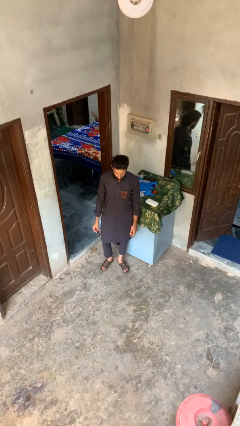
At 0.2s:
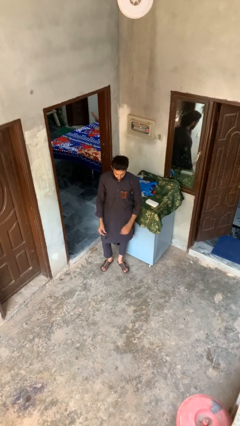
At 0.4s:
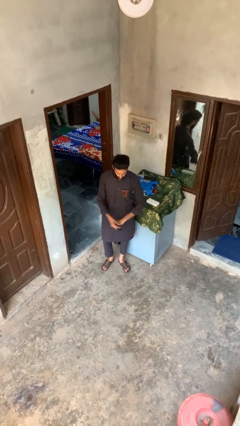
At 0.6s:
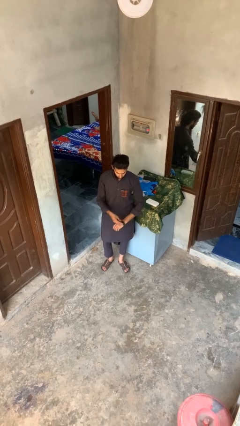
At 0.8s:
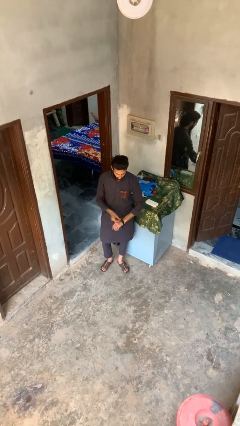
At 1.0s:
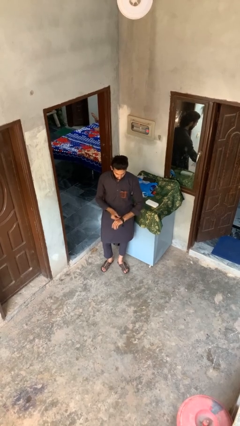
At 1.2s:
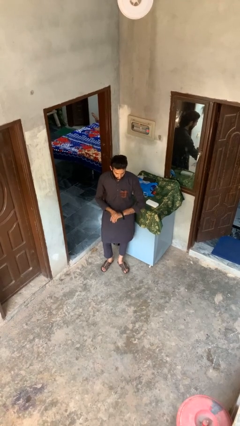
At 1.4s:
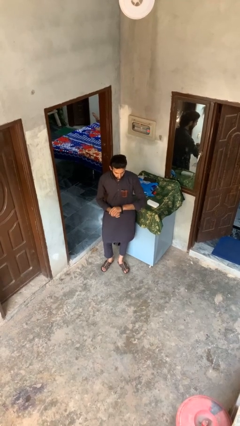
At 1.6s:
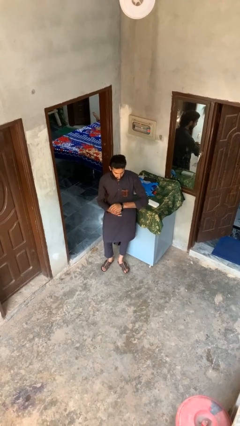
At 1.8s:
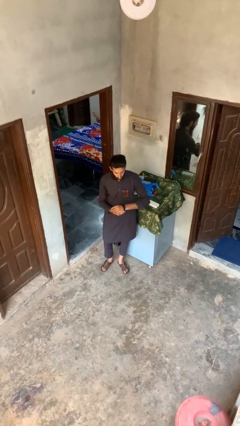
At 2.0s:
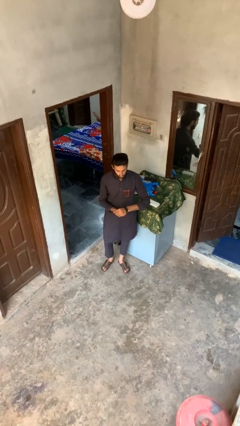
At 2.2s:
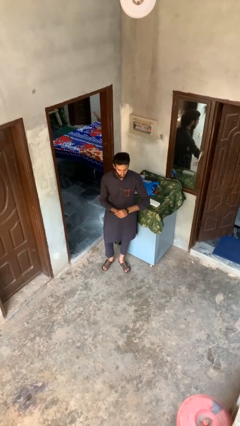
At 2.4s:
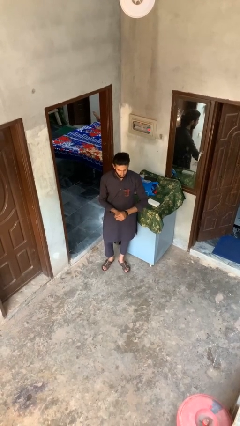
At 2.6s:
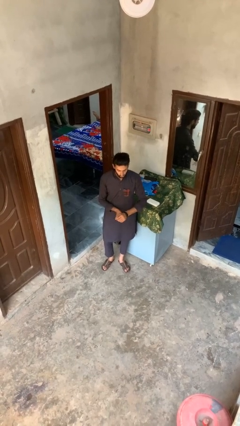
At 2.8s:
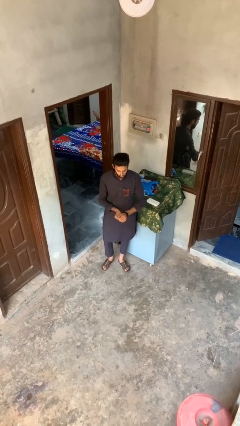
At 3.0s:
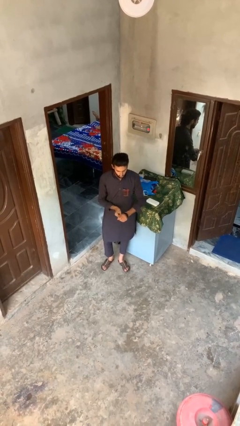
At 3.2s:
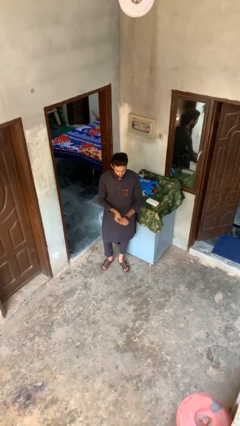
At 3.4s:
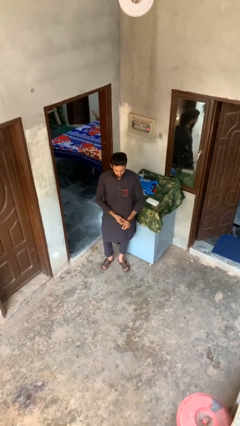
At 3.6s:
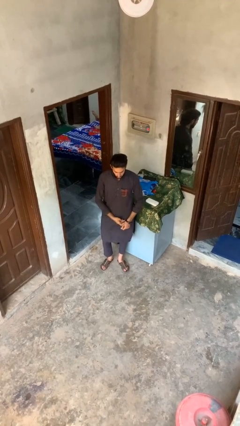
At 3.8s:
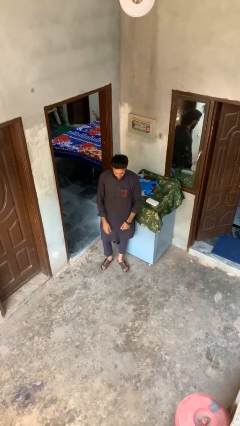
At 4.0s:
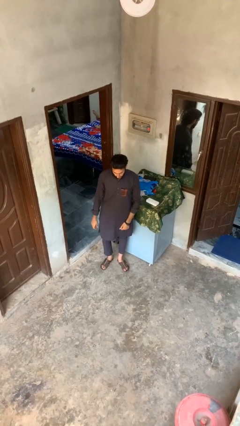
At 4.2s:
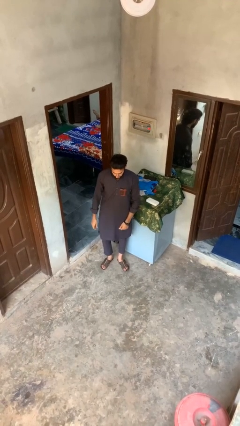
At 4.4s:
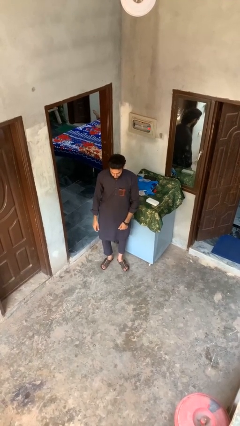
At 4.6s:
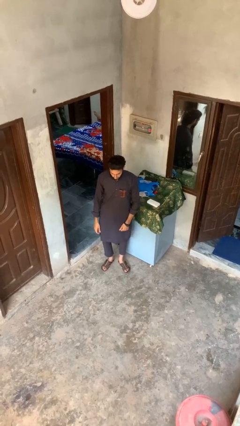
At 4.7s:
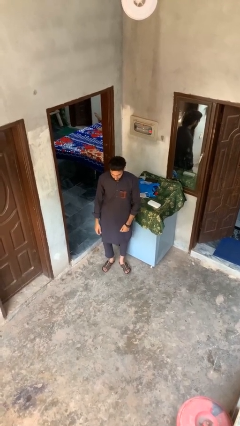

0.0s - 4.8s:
person puts on wristwatch

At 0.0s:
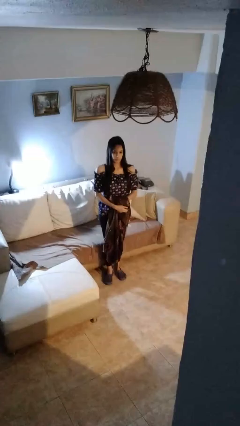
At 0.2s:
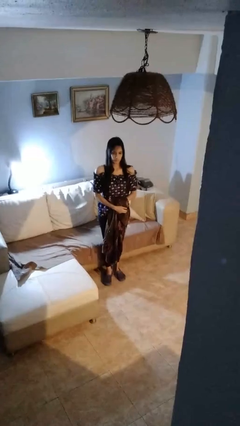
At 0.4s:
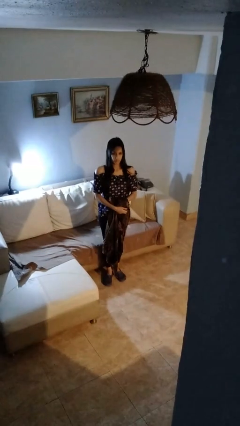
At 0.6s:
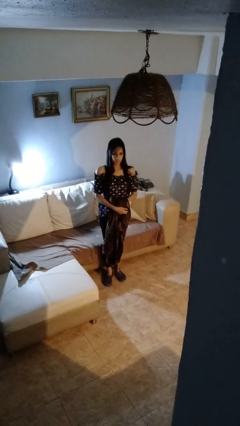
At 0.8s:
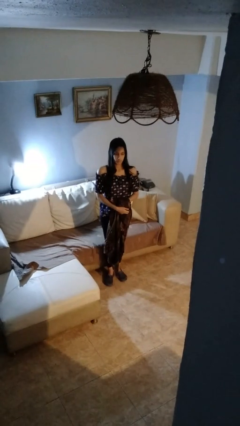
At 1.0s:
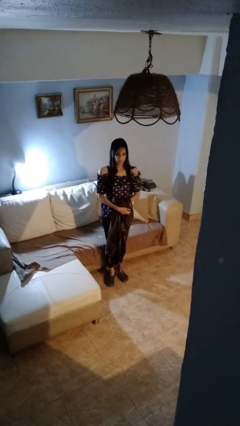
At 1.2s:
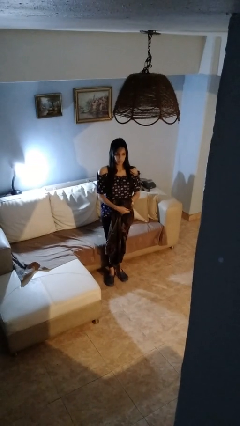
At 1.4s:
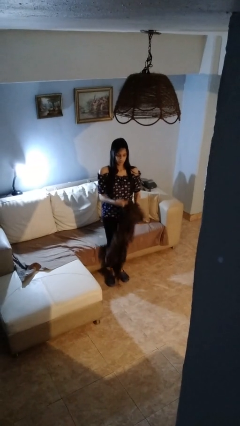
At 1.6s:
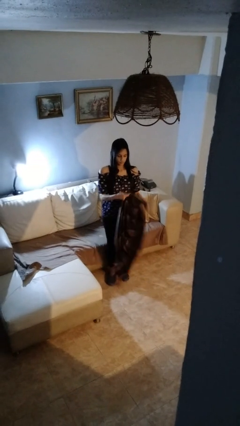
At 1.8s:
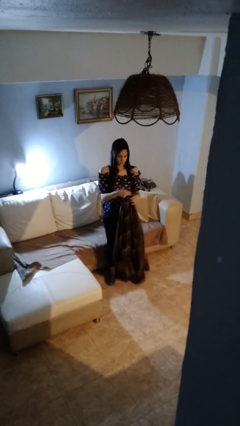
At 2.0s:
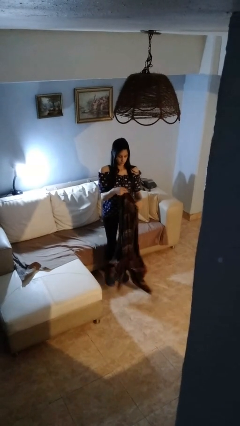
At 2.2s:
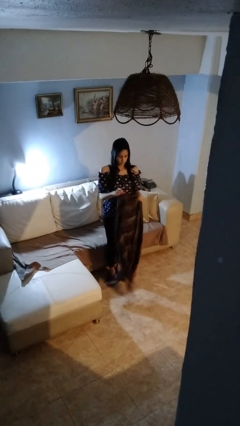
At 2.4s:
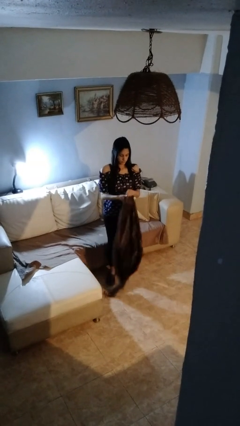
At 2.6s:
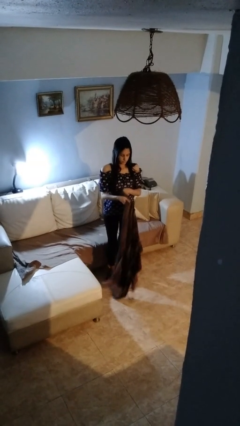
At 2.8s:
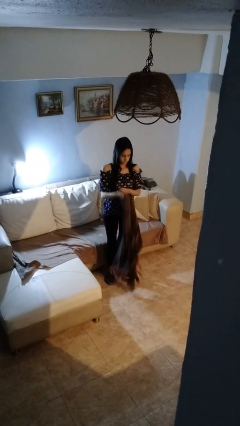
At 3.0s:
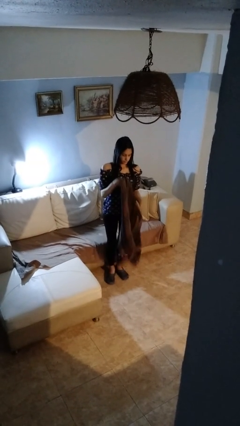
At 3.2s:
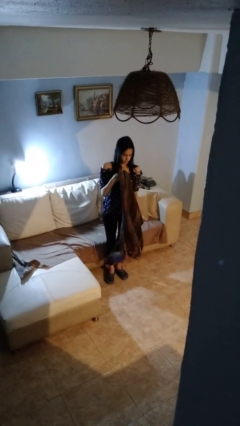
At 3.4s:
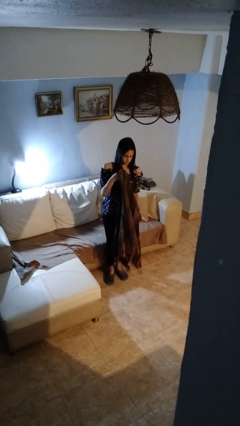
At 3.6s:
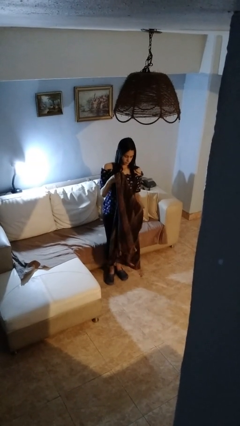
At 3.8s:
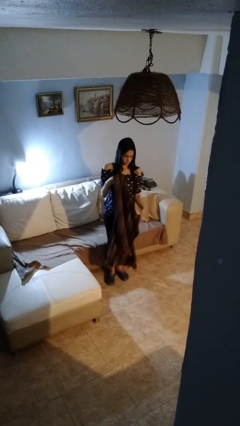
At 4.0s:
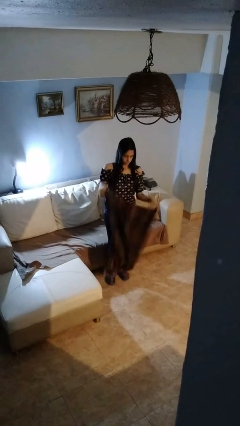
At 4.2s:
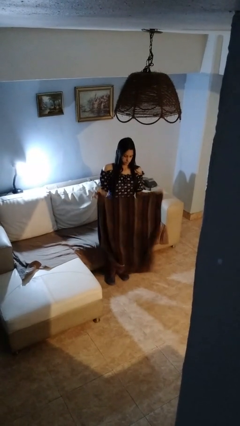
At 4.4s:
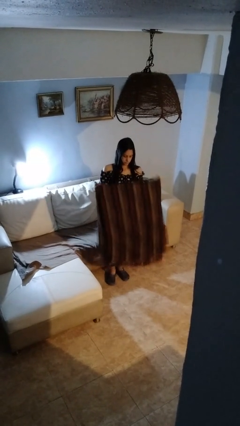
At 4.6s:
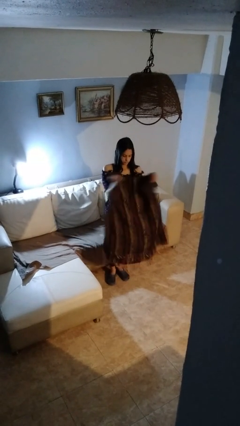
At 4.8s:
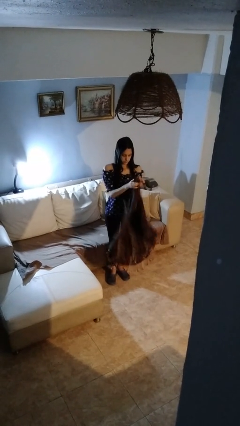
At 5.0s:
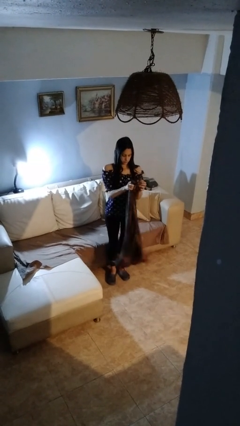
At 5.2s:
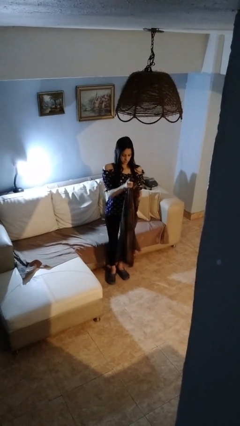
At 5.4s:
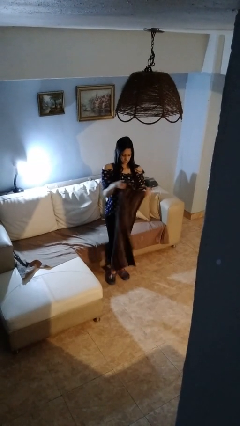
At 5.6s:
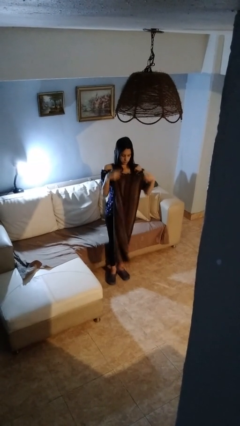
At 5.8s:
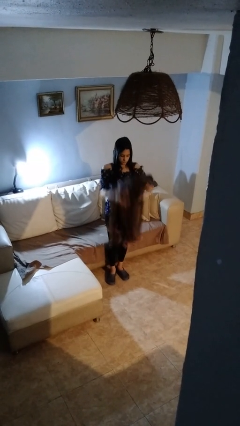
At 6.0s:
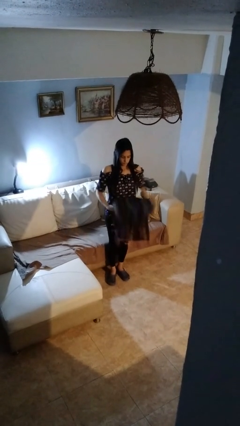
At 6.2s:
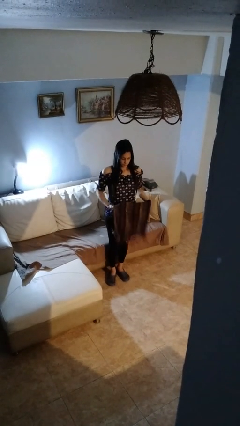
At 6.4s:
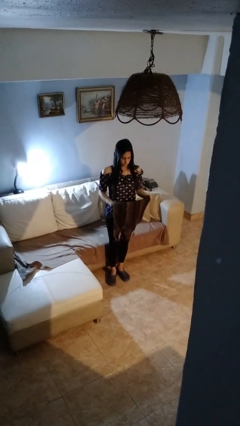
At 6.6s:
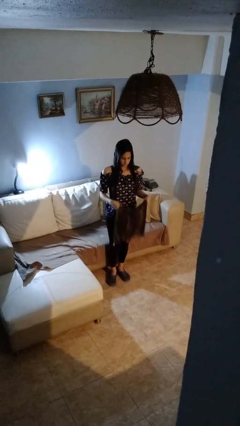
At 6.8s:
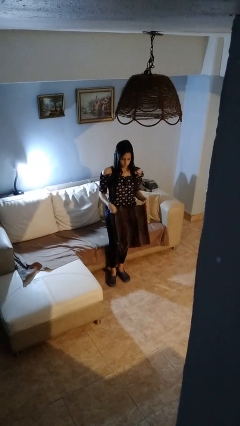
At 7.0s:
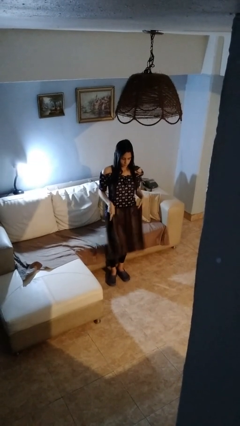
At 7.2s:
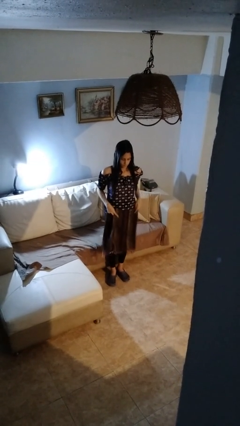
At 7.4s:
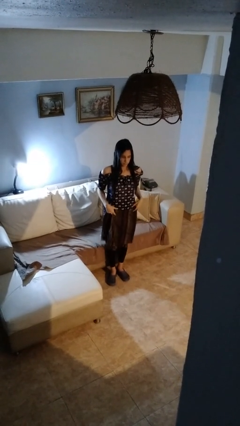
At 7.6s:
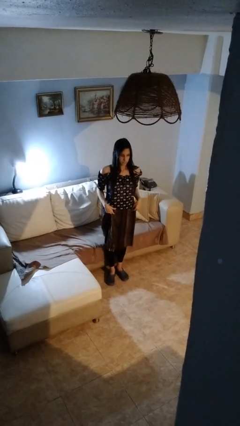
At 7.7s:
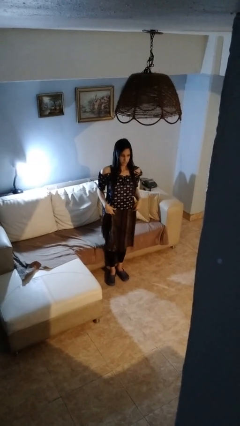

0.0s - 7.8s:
person folds blanket

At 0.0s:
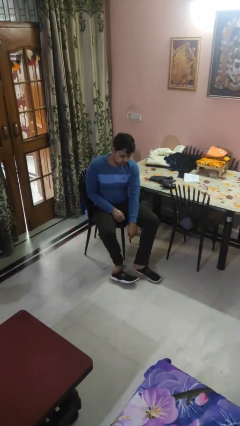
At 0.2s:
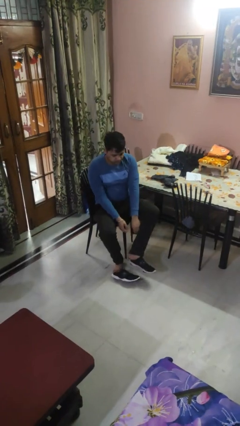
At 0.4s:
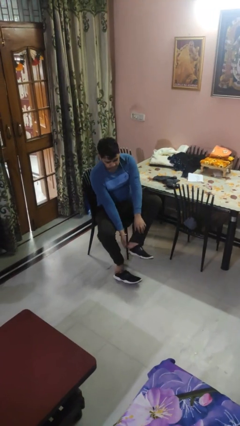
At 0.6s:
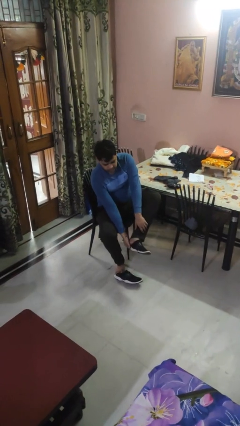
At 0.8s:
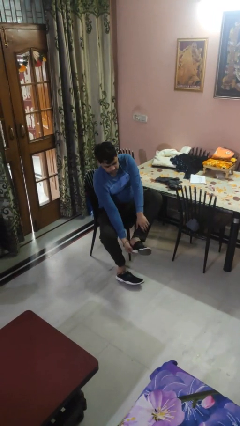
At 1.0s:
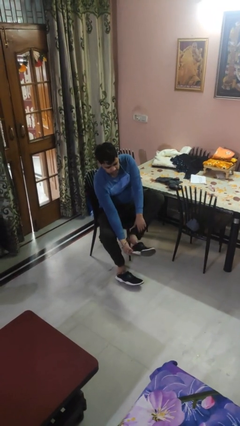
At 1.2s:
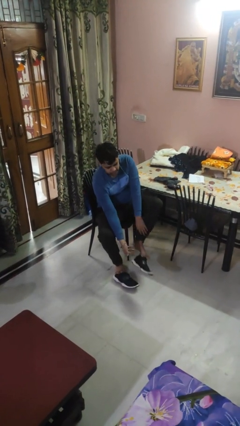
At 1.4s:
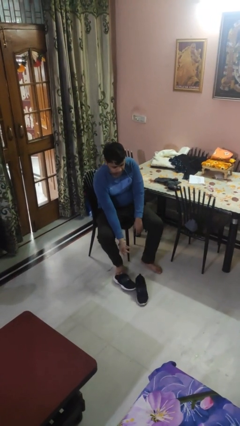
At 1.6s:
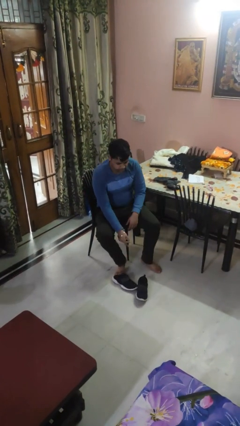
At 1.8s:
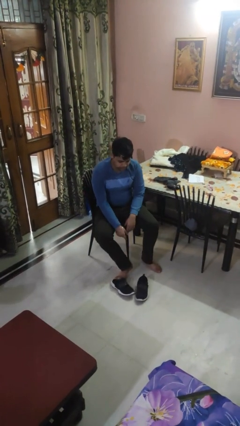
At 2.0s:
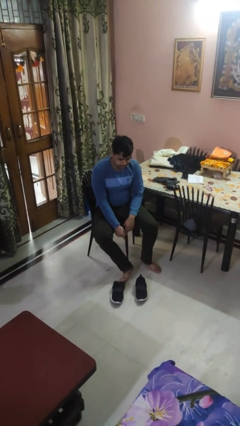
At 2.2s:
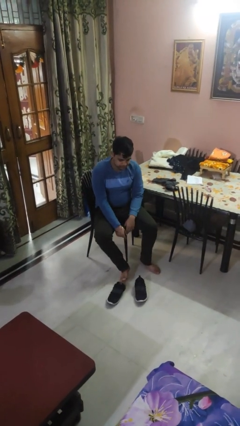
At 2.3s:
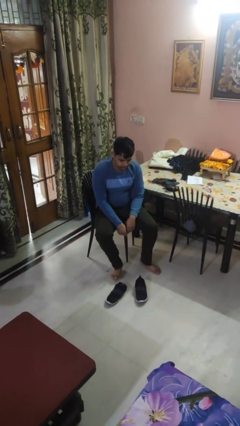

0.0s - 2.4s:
person takes off shoes

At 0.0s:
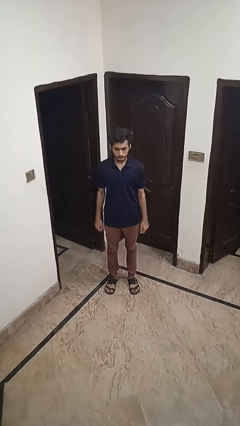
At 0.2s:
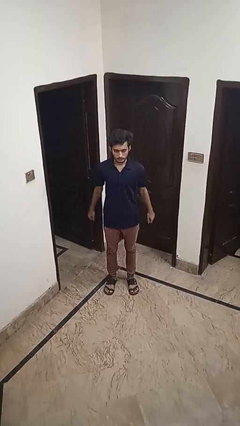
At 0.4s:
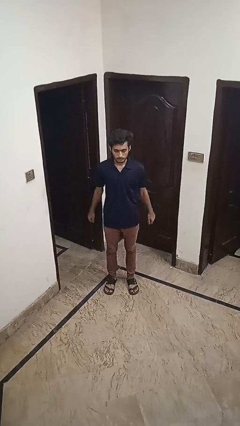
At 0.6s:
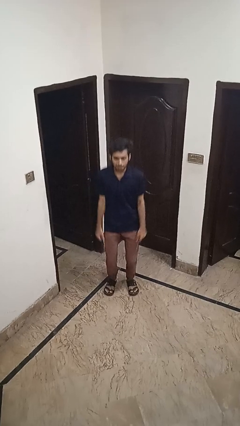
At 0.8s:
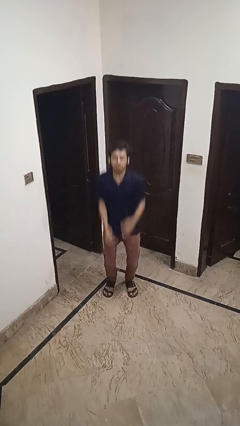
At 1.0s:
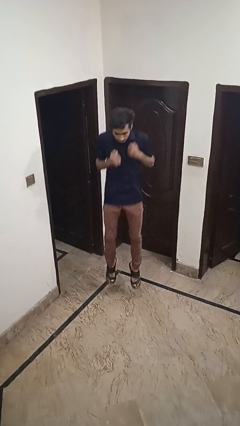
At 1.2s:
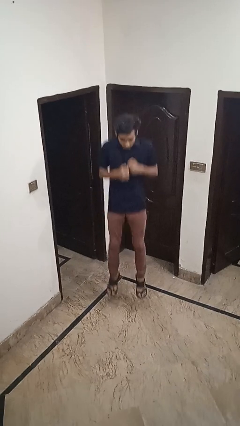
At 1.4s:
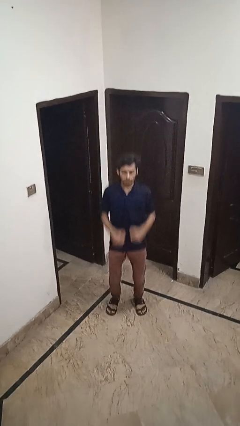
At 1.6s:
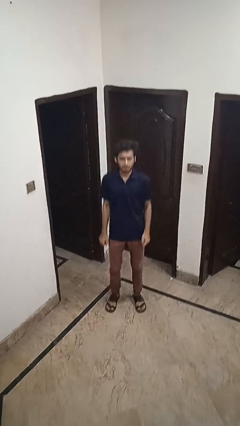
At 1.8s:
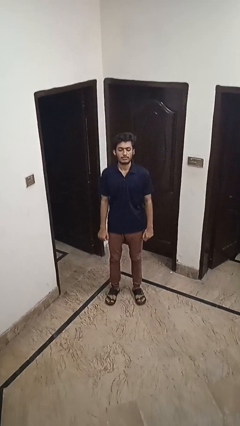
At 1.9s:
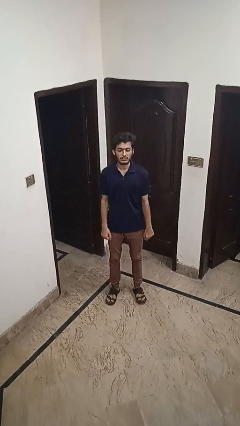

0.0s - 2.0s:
person jumps

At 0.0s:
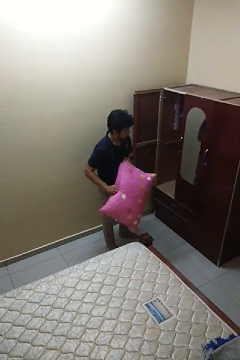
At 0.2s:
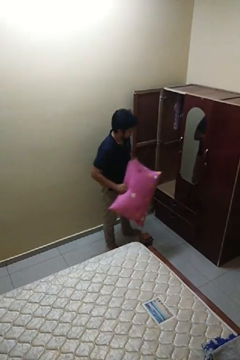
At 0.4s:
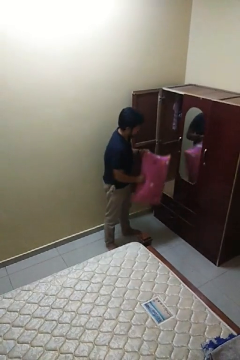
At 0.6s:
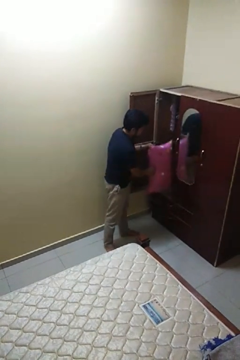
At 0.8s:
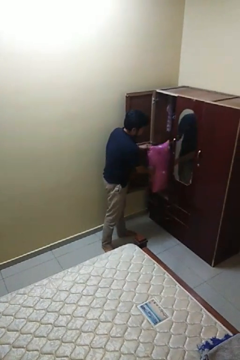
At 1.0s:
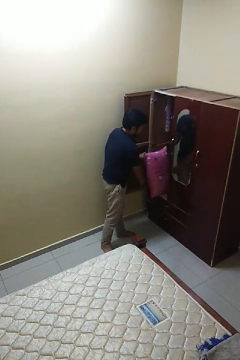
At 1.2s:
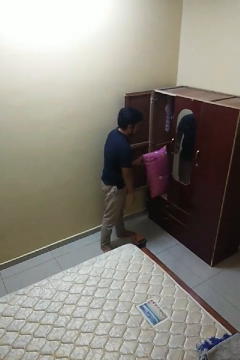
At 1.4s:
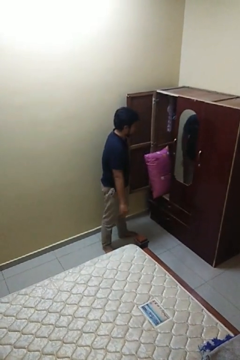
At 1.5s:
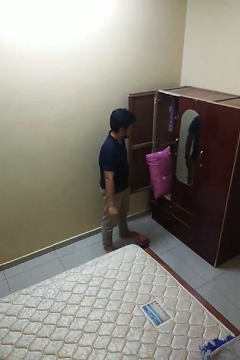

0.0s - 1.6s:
person puts down object into cabinet
